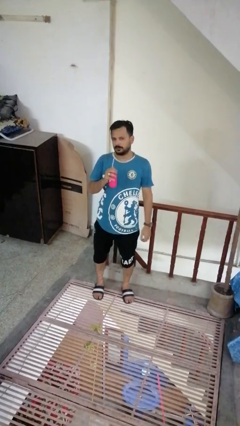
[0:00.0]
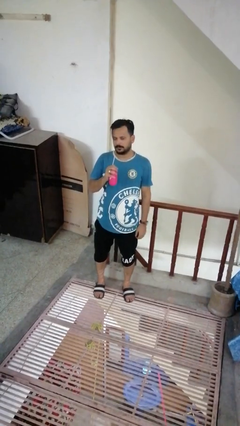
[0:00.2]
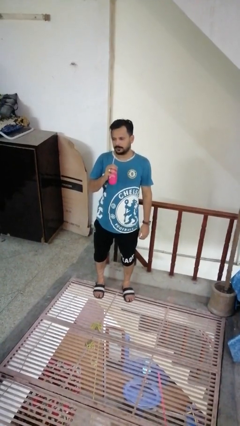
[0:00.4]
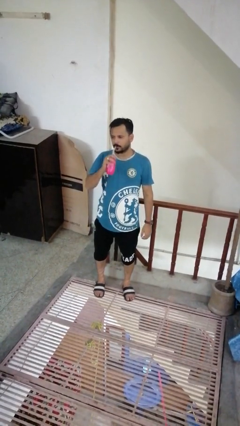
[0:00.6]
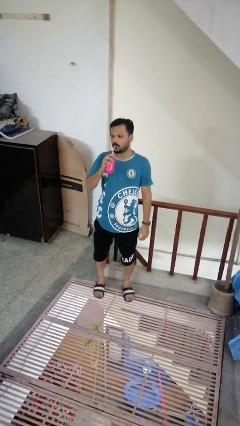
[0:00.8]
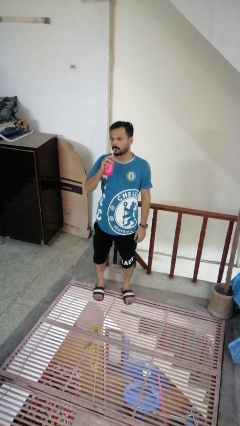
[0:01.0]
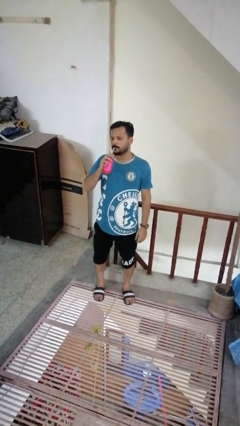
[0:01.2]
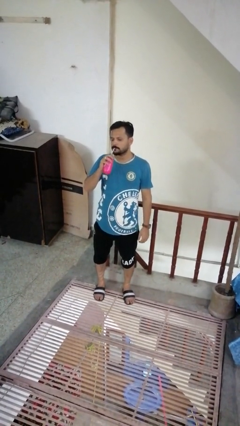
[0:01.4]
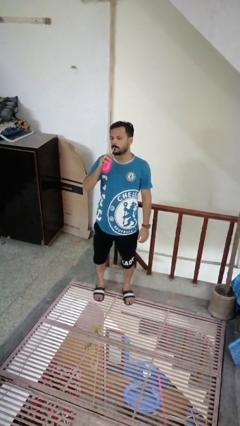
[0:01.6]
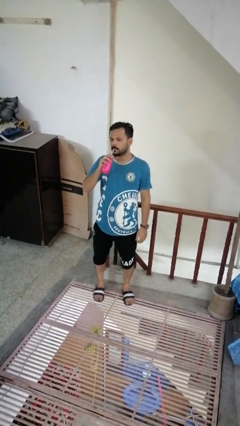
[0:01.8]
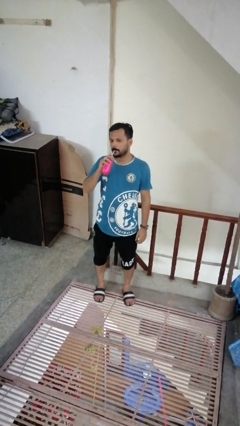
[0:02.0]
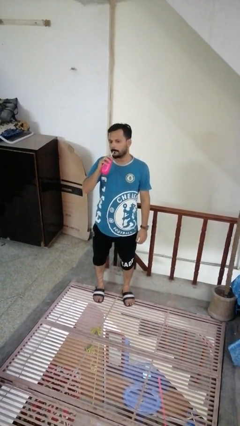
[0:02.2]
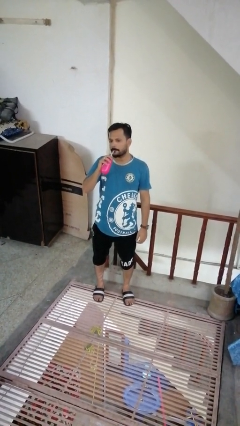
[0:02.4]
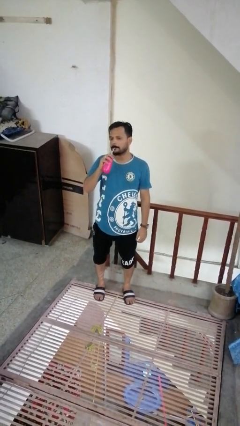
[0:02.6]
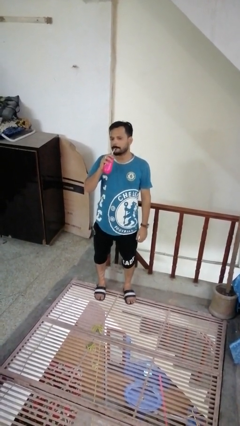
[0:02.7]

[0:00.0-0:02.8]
person drinks from straw

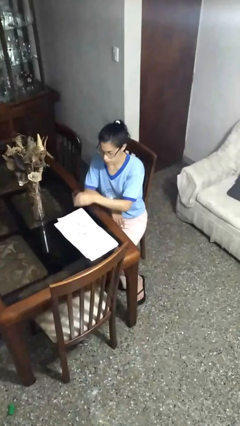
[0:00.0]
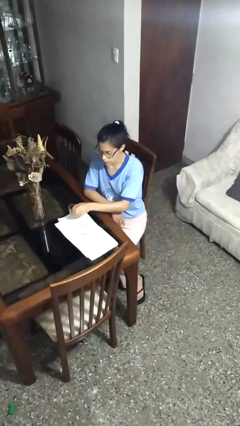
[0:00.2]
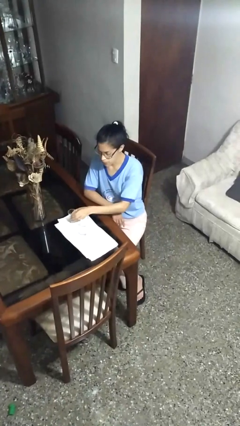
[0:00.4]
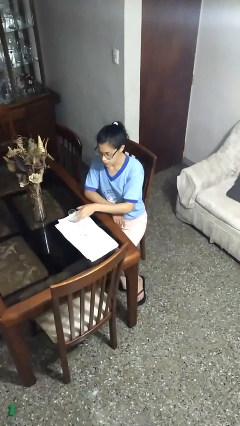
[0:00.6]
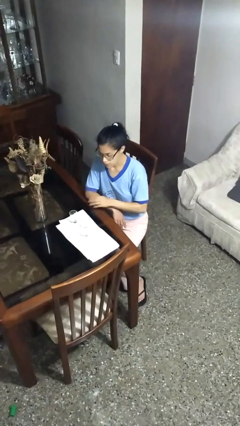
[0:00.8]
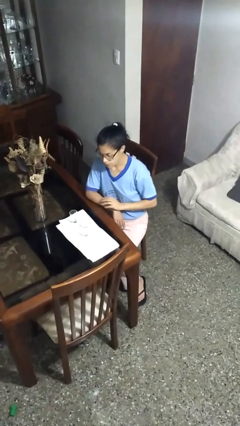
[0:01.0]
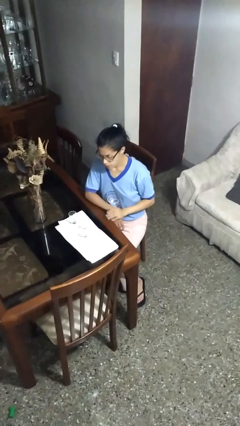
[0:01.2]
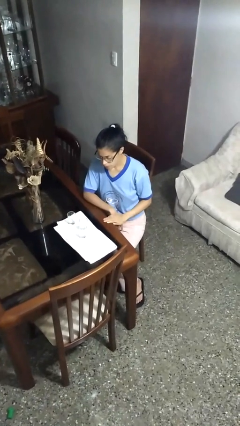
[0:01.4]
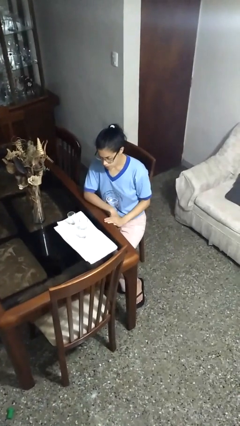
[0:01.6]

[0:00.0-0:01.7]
person puts down object on table

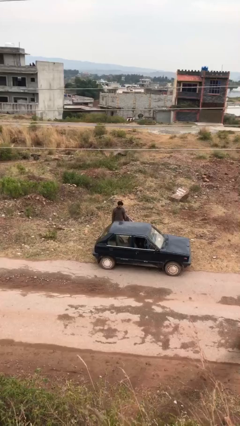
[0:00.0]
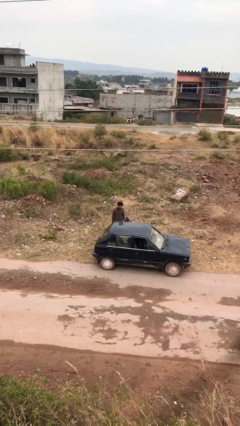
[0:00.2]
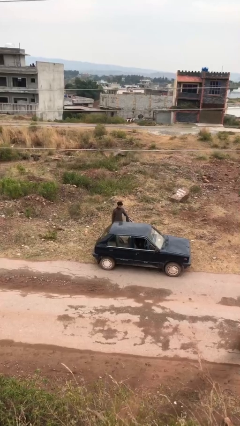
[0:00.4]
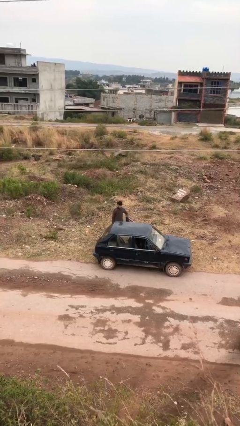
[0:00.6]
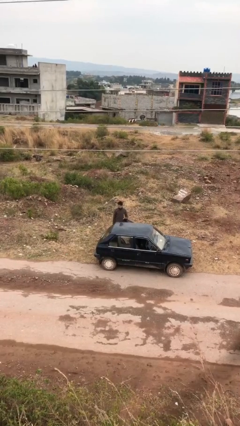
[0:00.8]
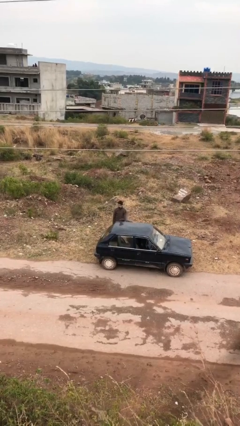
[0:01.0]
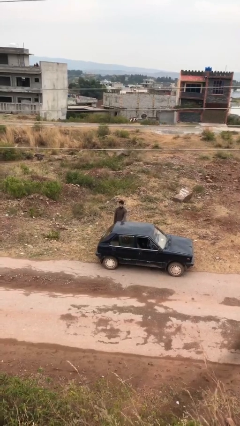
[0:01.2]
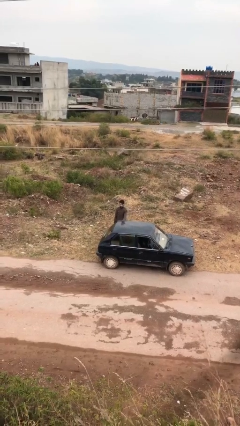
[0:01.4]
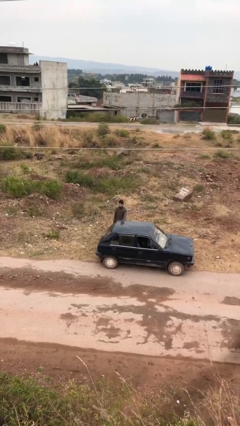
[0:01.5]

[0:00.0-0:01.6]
person closes car door

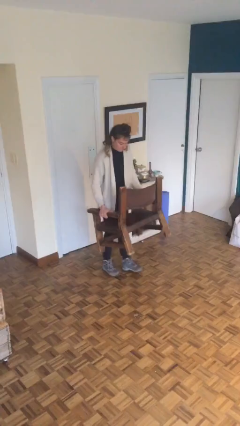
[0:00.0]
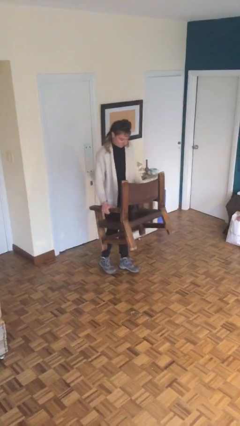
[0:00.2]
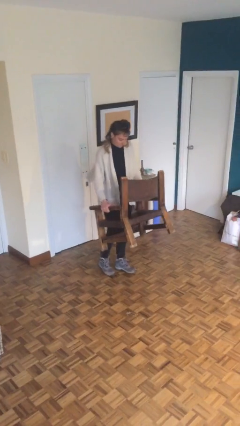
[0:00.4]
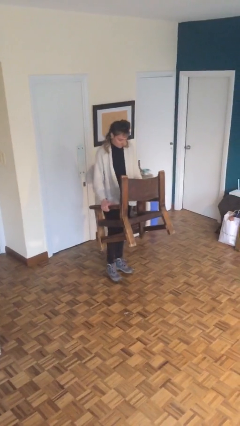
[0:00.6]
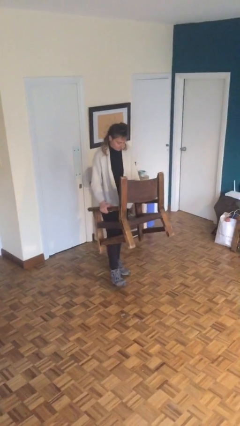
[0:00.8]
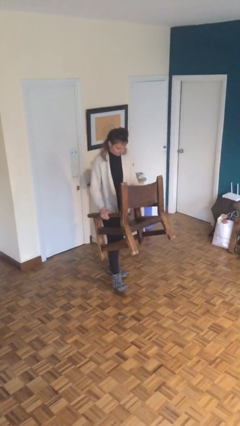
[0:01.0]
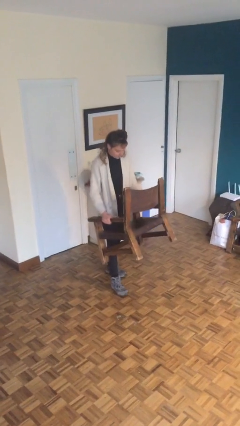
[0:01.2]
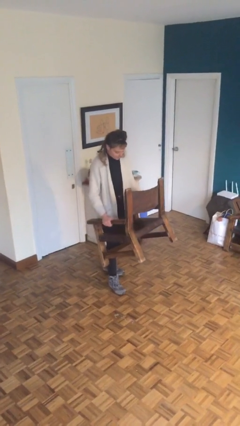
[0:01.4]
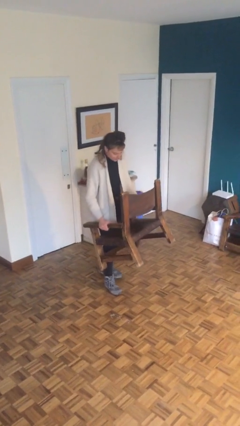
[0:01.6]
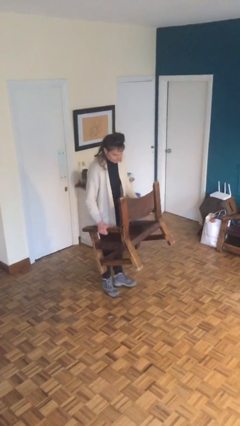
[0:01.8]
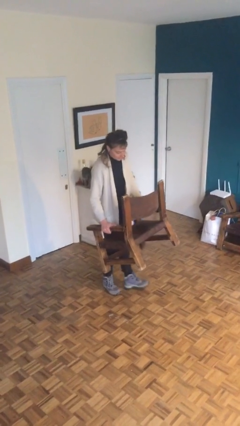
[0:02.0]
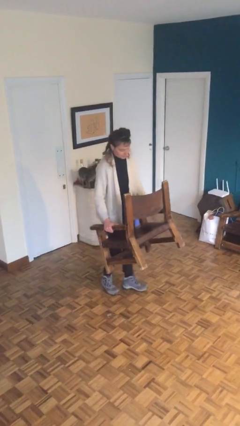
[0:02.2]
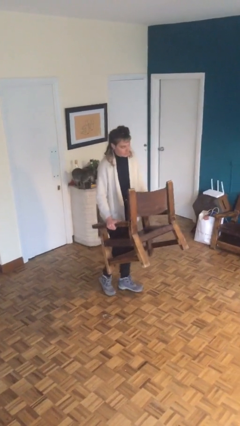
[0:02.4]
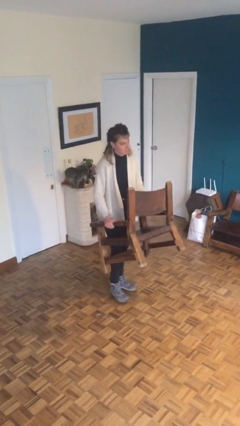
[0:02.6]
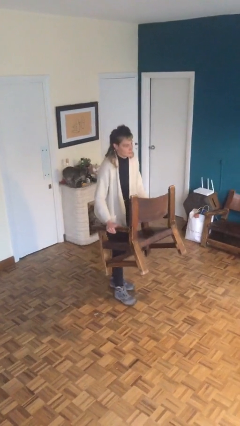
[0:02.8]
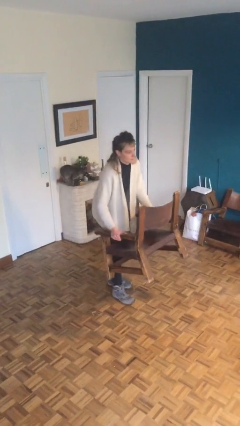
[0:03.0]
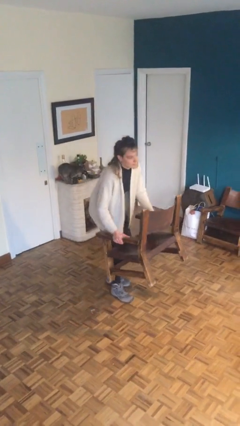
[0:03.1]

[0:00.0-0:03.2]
person carries heavy object

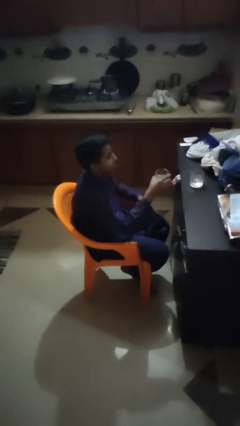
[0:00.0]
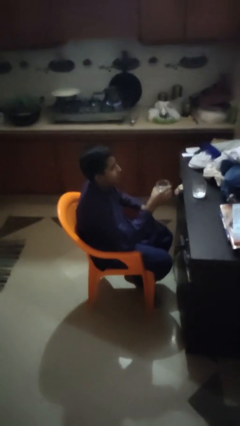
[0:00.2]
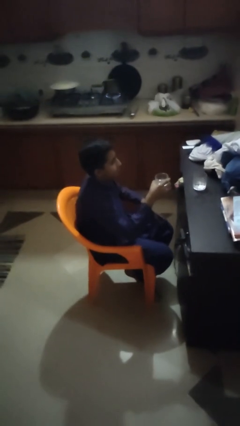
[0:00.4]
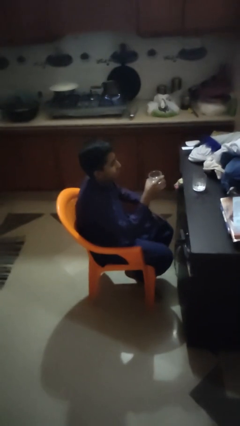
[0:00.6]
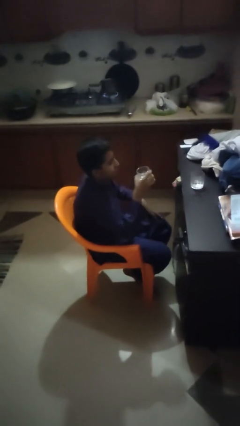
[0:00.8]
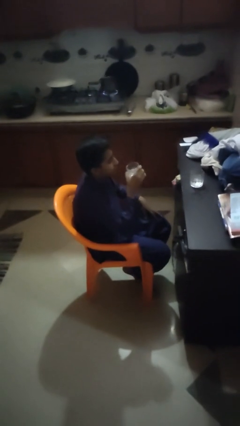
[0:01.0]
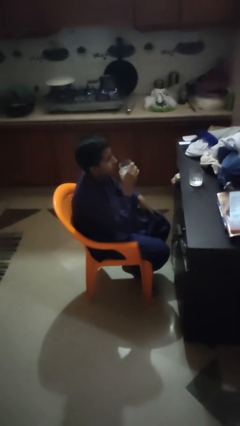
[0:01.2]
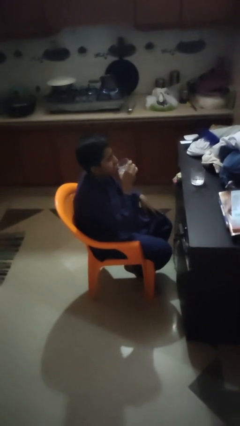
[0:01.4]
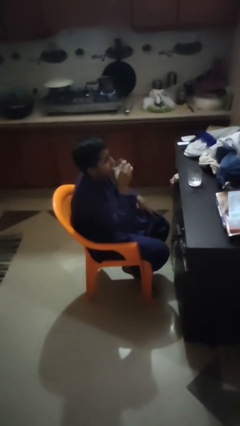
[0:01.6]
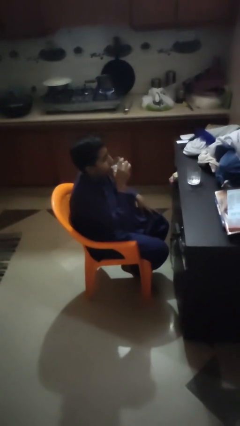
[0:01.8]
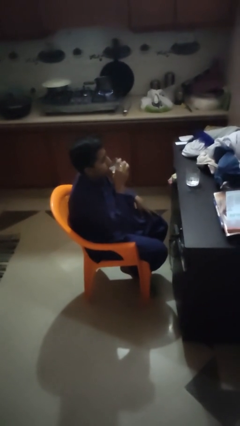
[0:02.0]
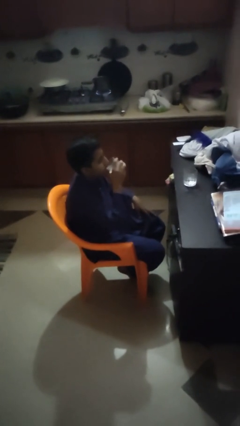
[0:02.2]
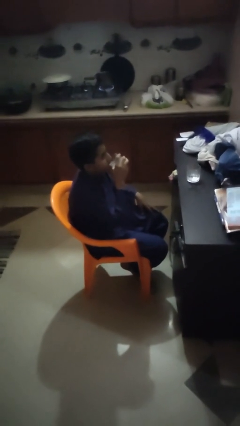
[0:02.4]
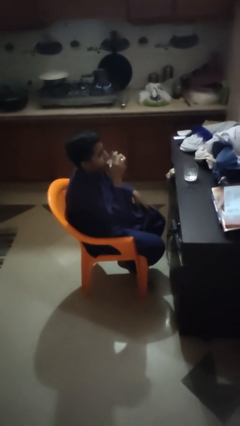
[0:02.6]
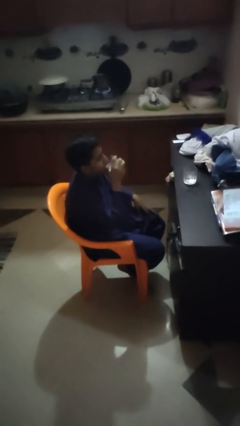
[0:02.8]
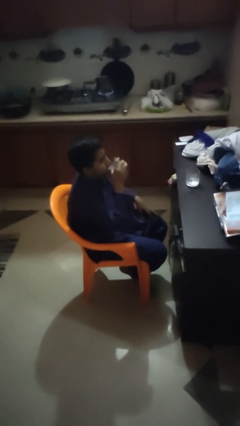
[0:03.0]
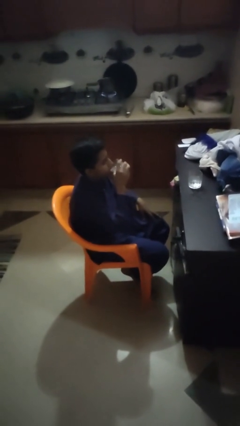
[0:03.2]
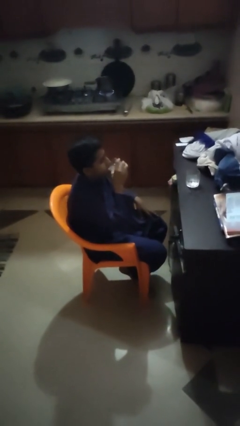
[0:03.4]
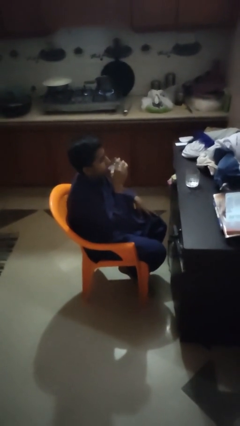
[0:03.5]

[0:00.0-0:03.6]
person drinks from shotglass

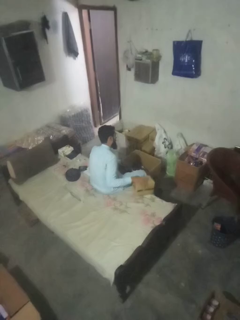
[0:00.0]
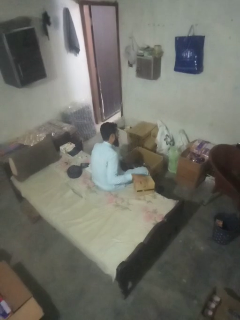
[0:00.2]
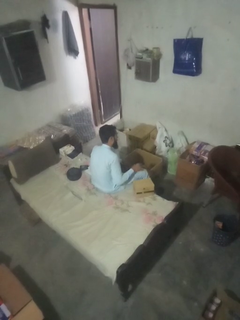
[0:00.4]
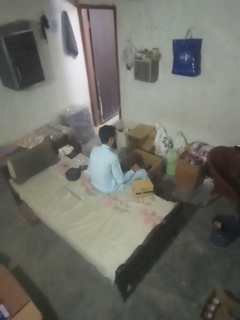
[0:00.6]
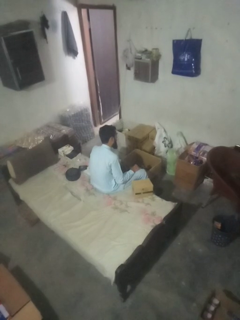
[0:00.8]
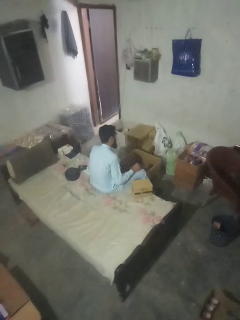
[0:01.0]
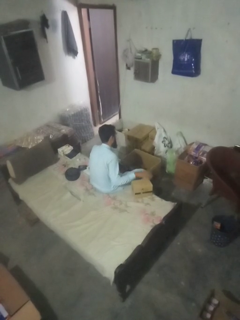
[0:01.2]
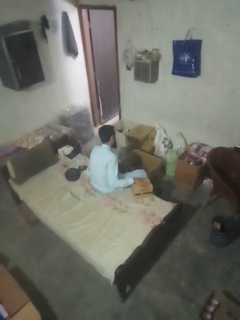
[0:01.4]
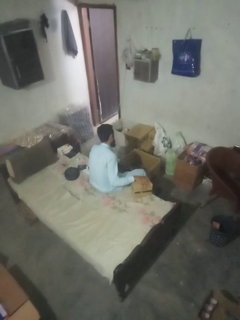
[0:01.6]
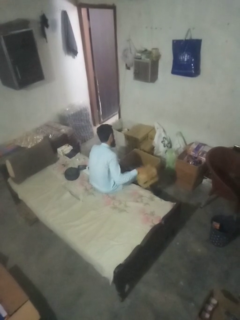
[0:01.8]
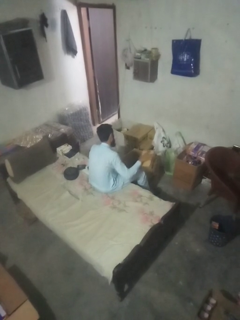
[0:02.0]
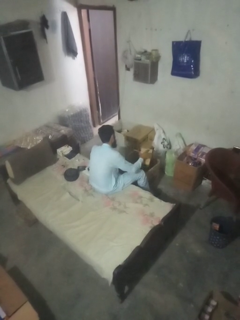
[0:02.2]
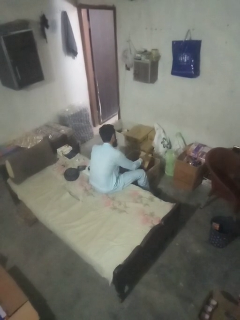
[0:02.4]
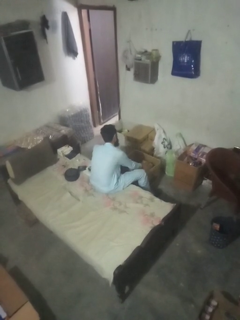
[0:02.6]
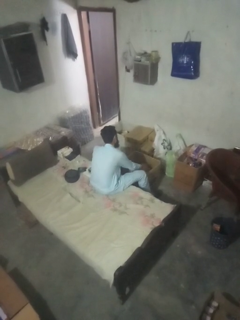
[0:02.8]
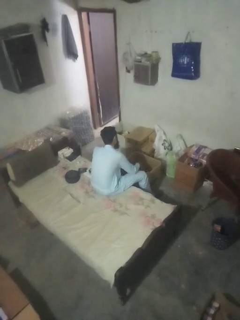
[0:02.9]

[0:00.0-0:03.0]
person puts object into box

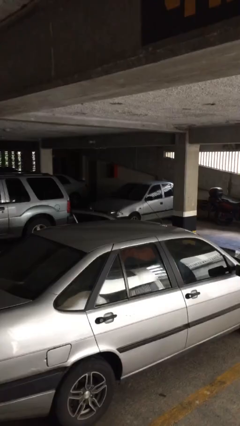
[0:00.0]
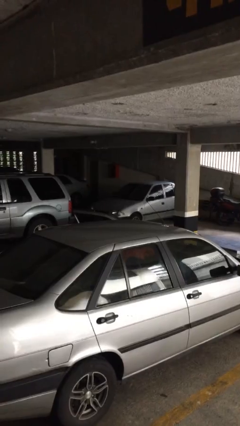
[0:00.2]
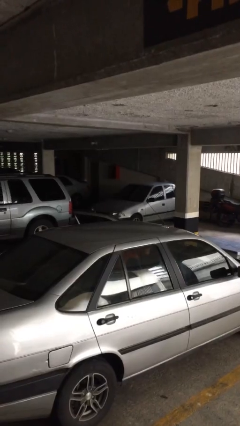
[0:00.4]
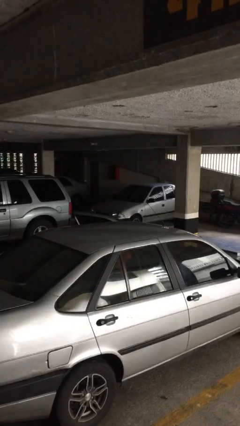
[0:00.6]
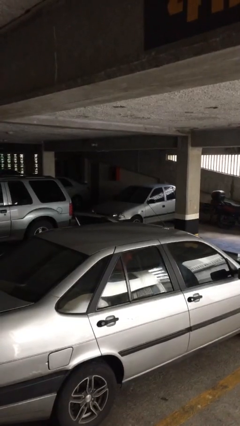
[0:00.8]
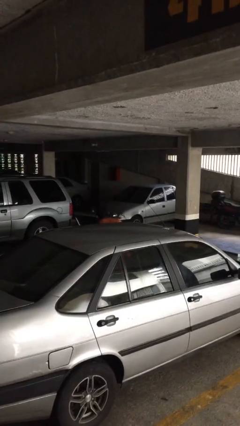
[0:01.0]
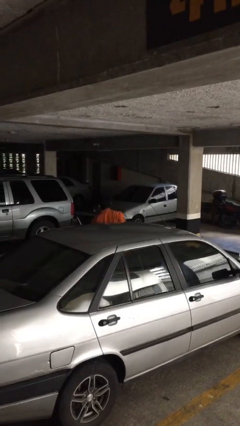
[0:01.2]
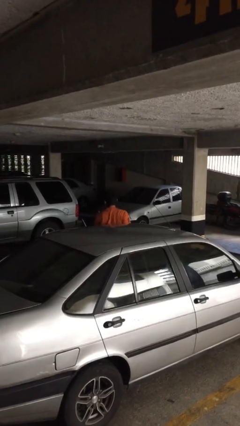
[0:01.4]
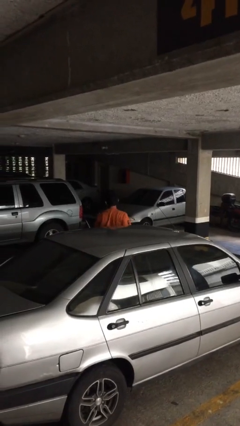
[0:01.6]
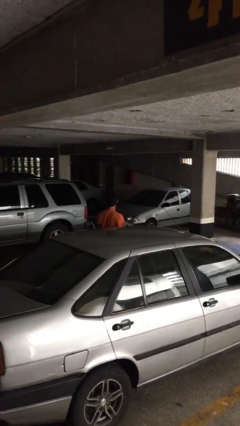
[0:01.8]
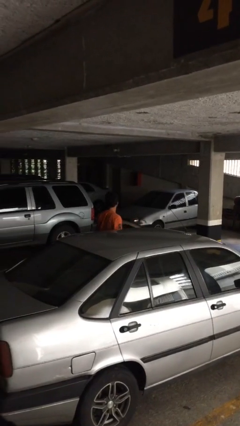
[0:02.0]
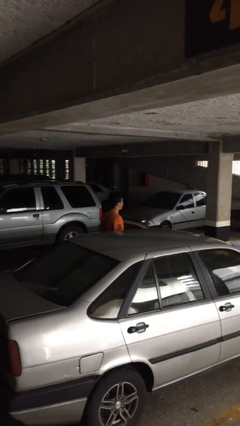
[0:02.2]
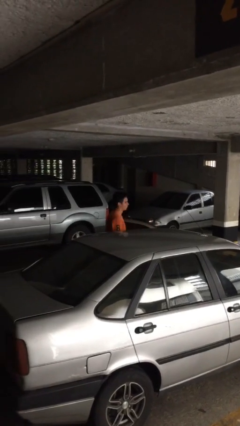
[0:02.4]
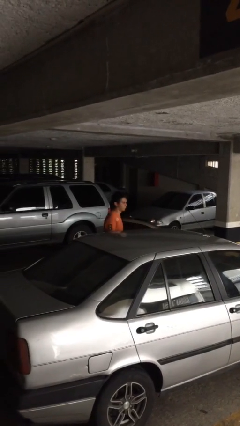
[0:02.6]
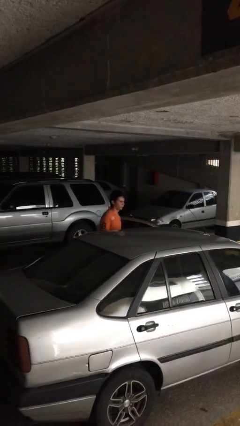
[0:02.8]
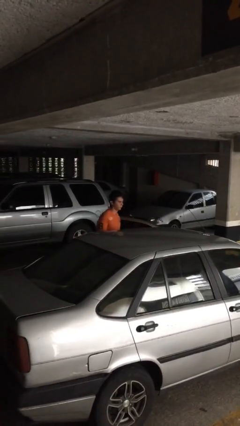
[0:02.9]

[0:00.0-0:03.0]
person exits car
